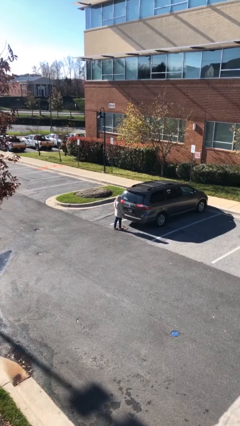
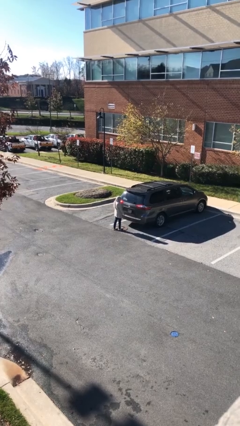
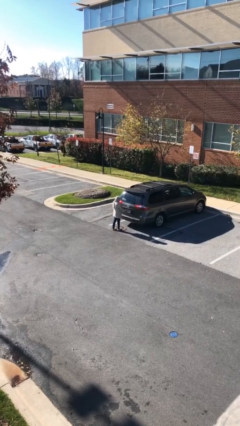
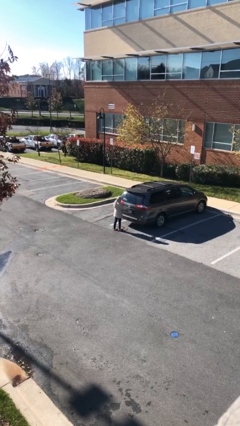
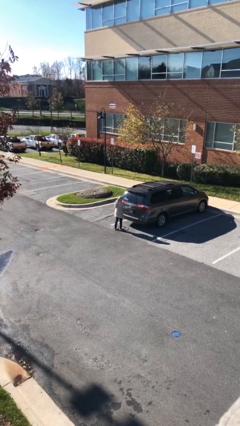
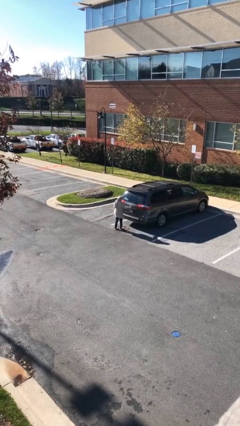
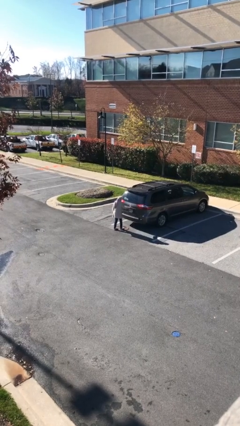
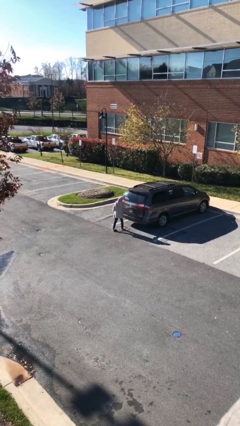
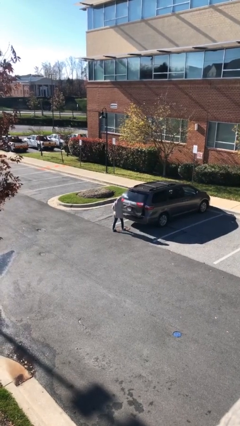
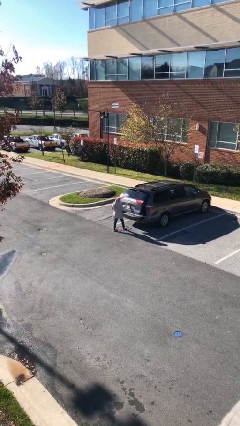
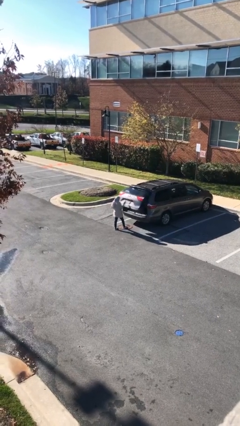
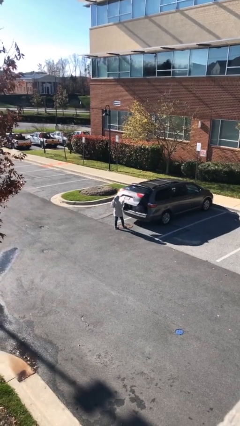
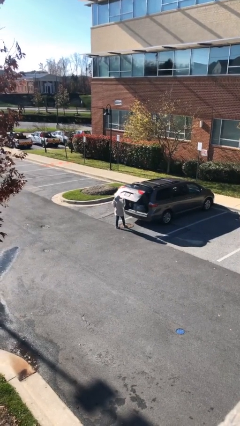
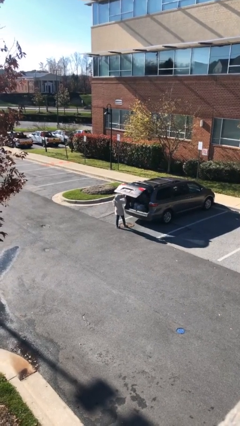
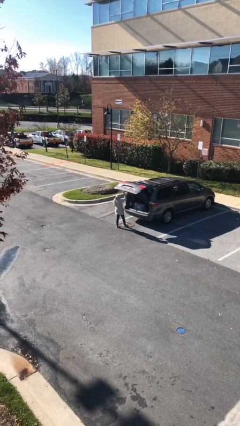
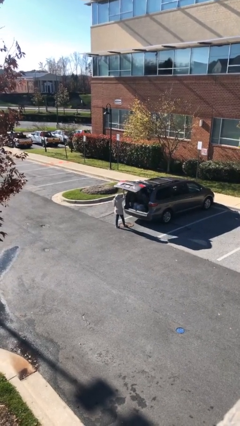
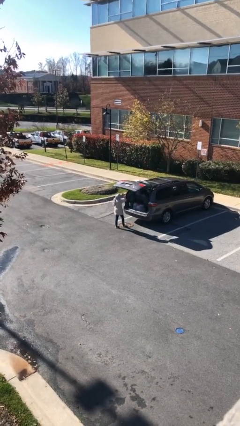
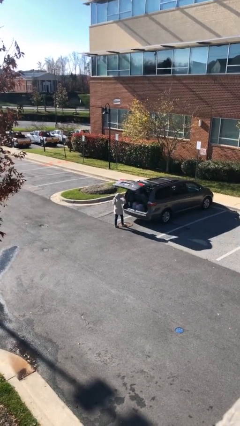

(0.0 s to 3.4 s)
person opens car trunk

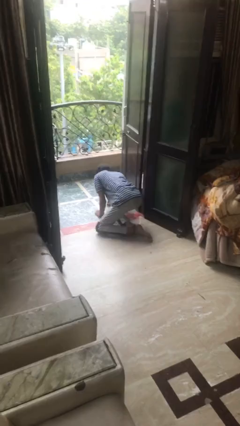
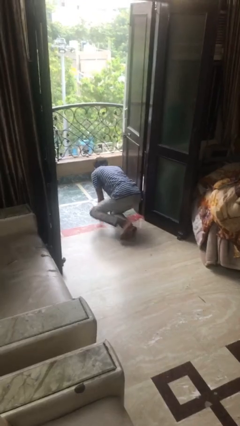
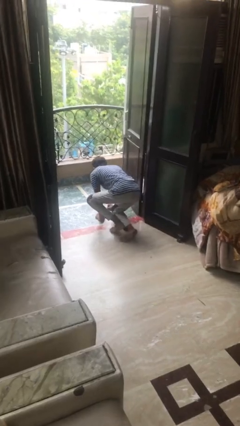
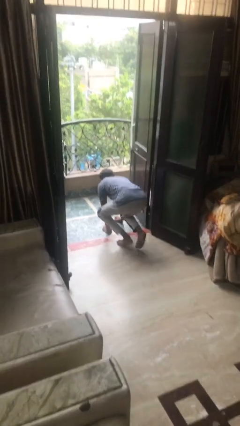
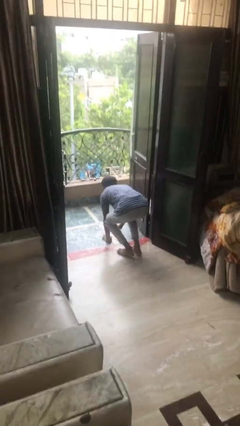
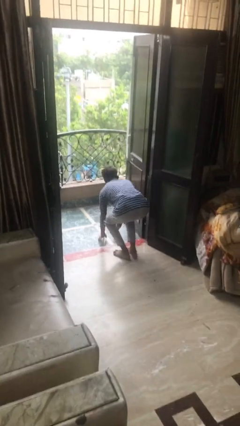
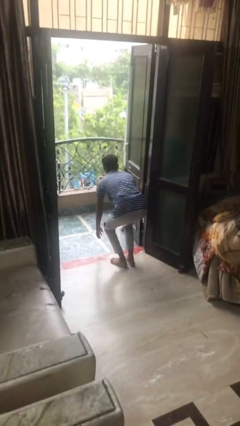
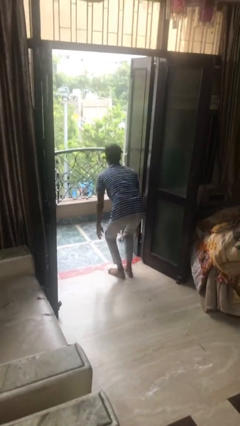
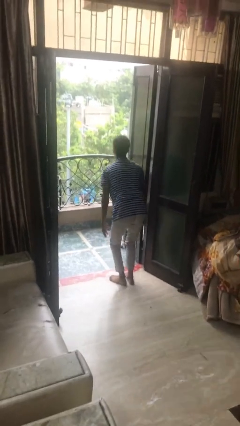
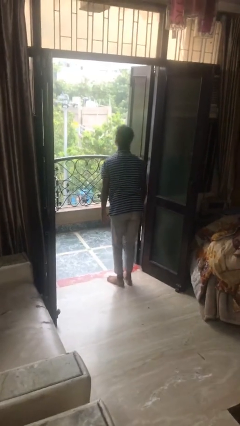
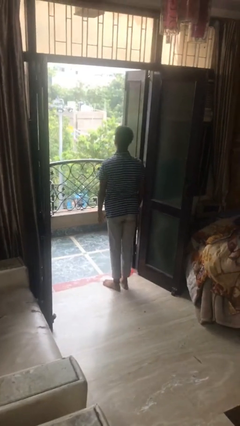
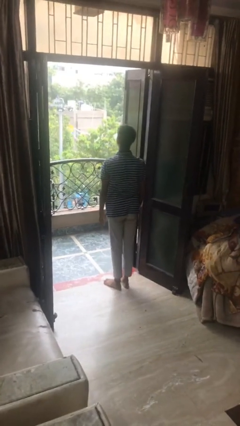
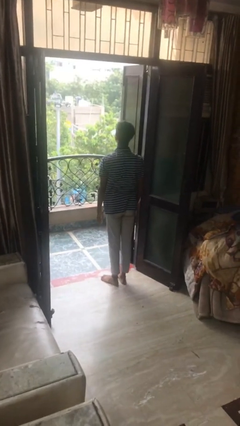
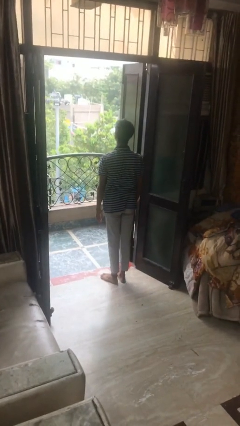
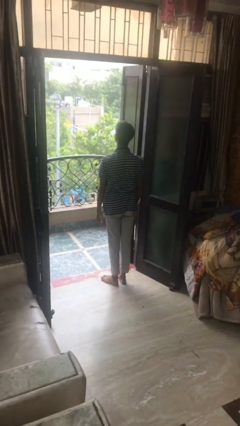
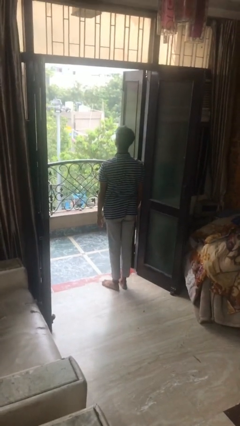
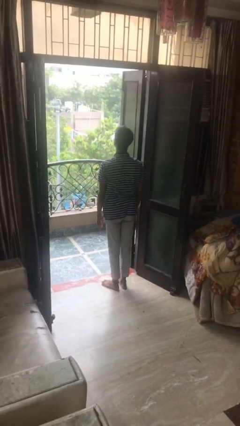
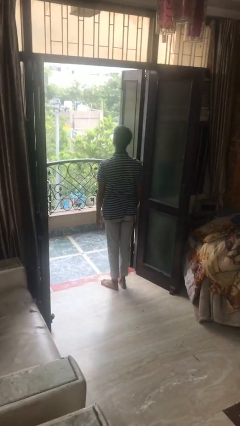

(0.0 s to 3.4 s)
person stands up from floor

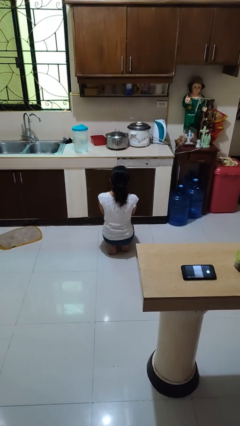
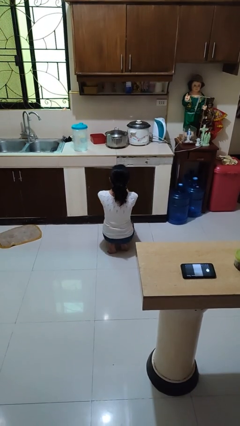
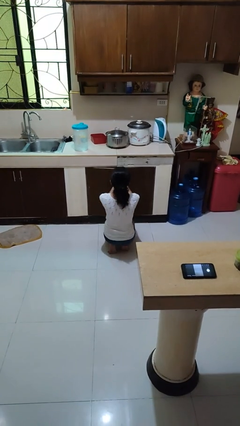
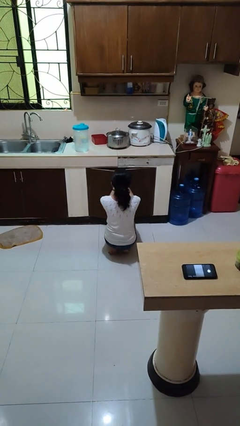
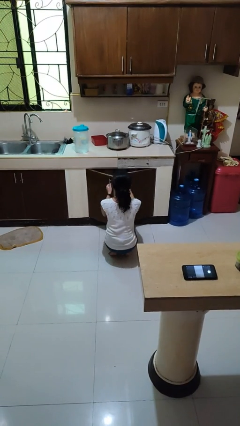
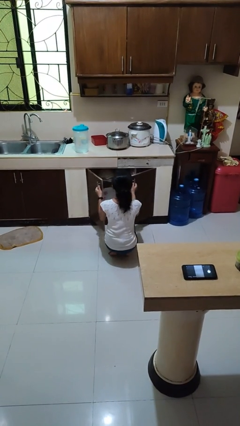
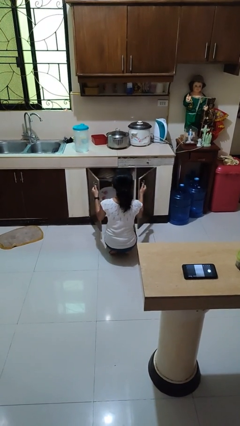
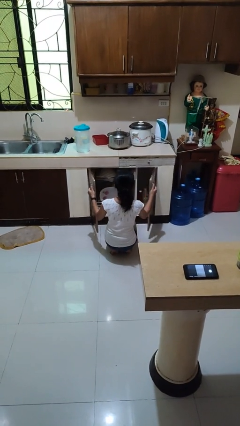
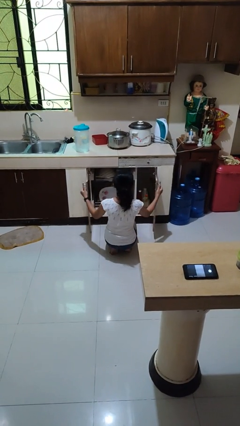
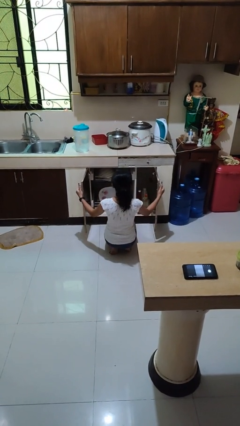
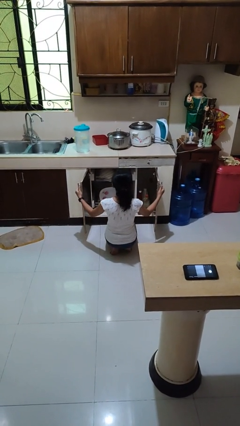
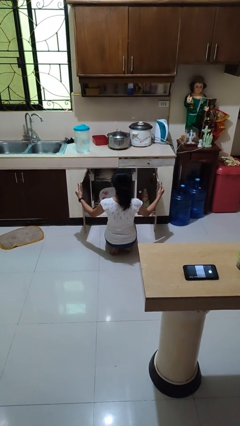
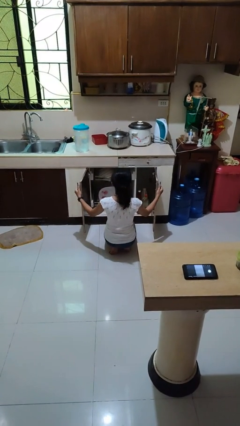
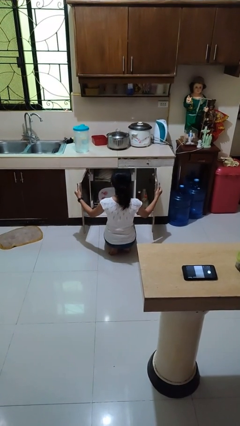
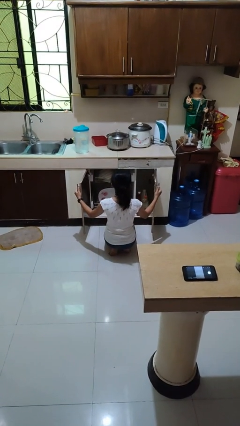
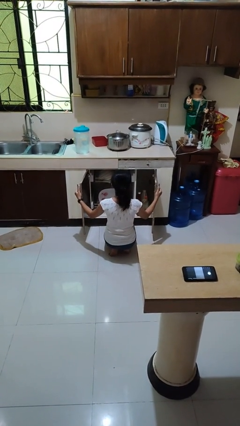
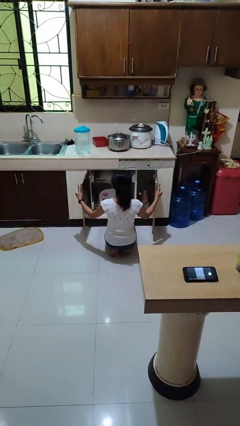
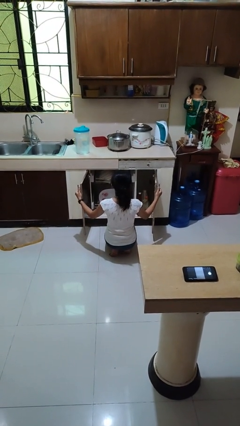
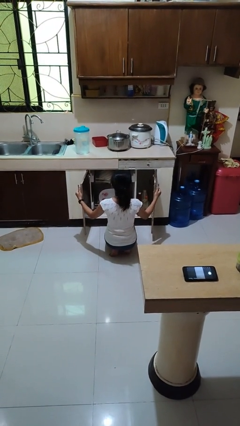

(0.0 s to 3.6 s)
person opens dishwasher

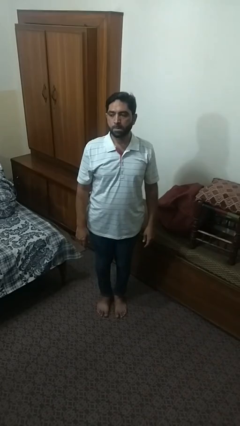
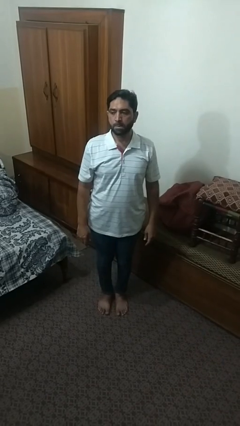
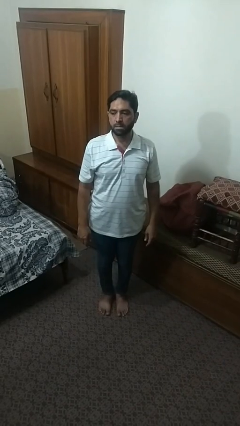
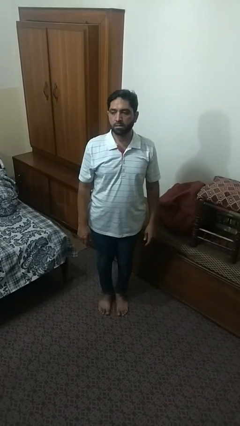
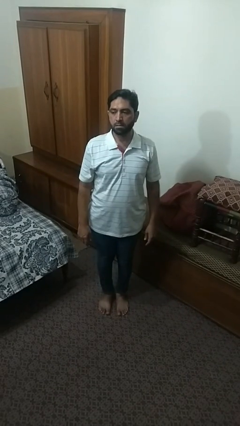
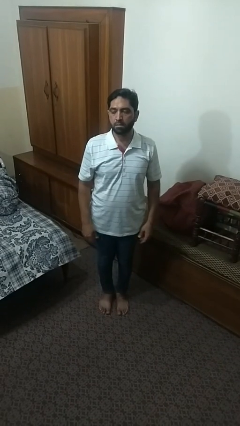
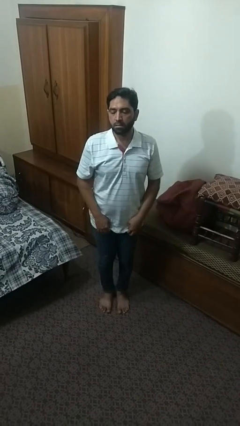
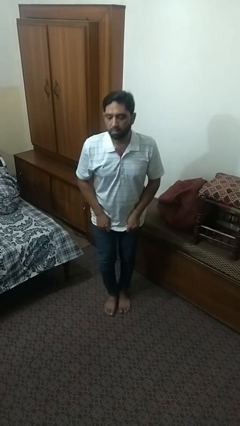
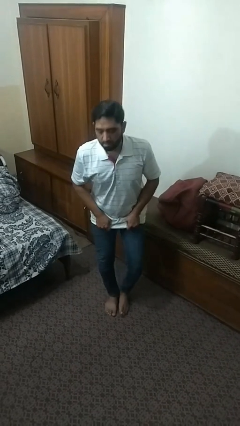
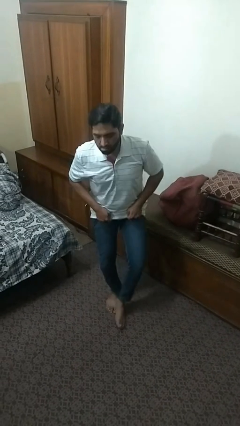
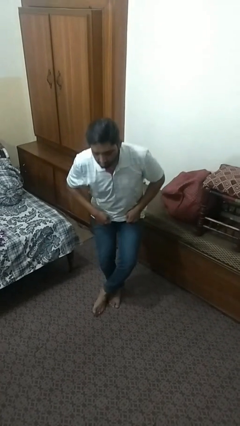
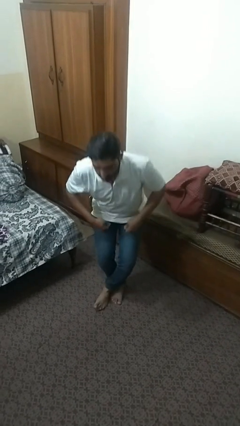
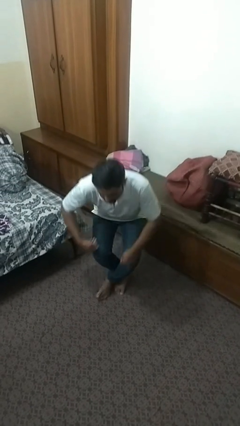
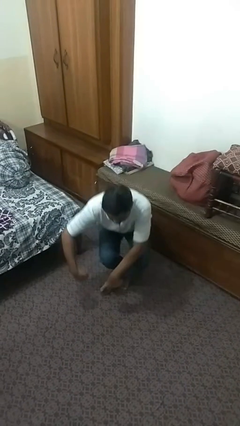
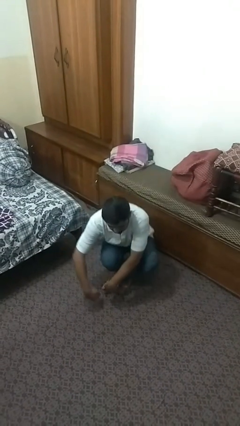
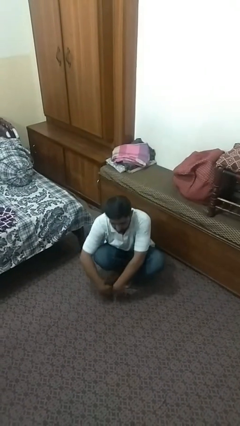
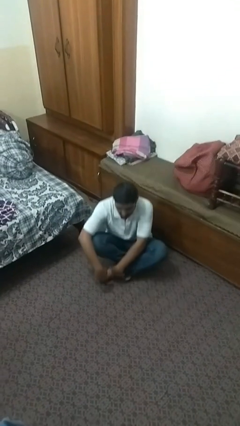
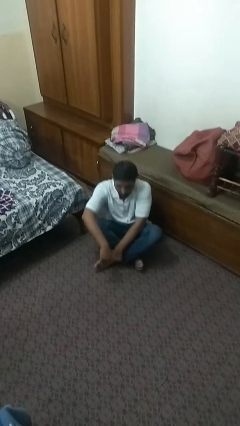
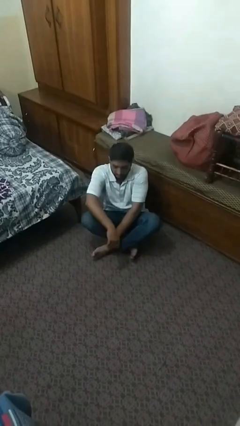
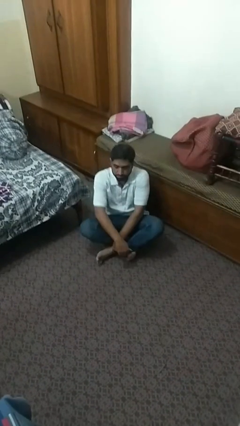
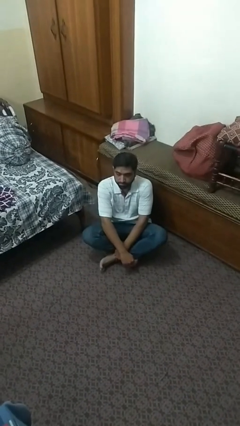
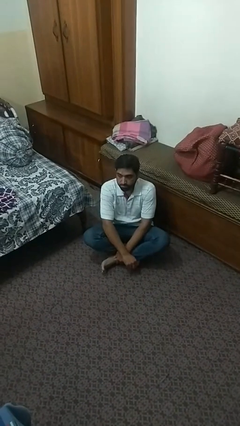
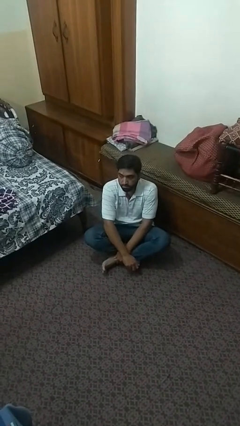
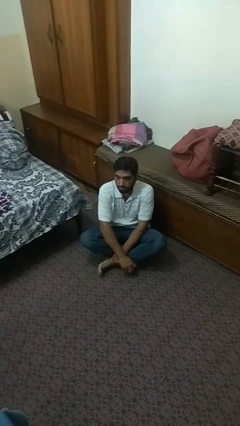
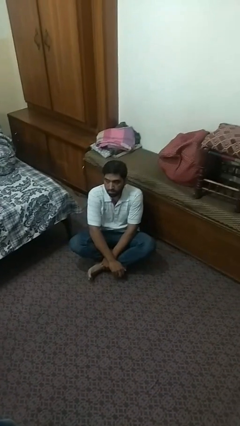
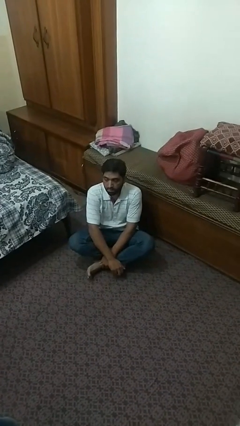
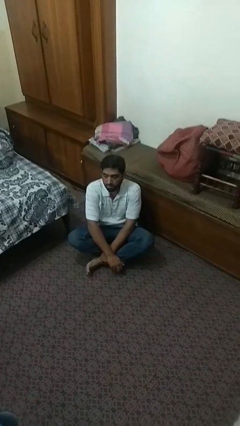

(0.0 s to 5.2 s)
person sits crisscross

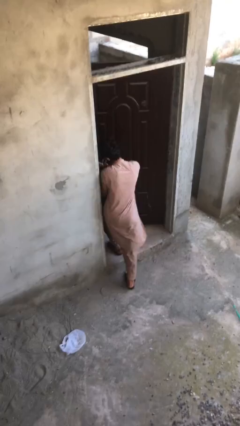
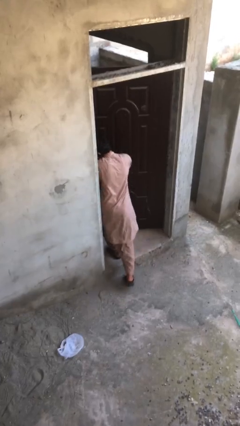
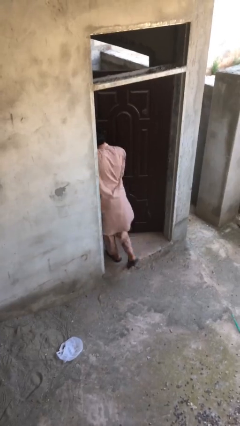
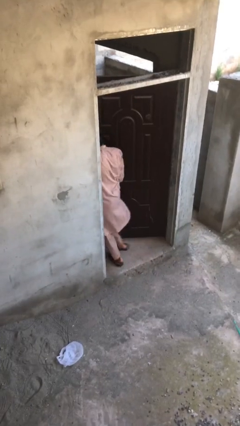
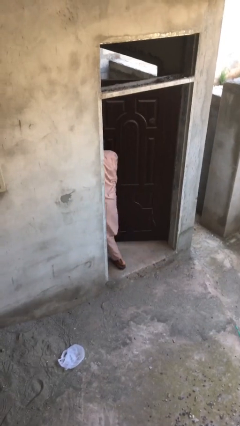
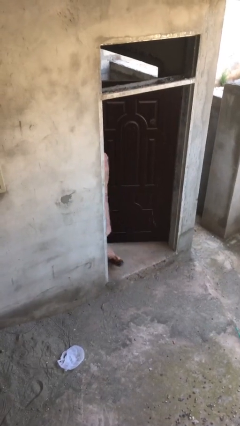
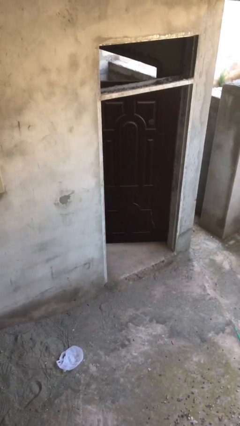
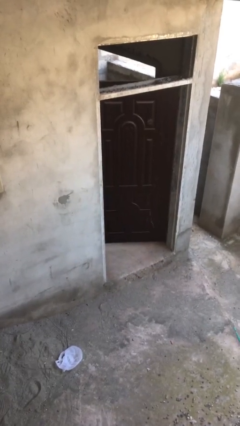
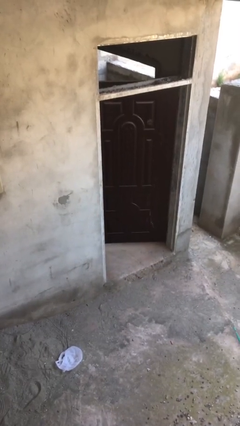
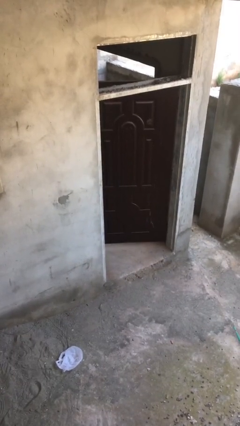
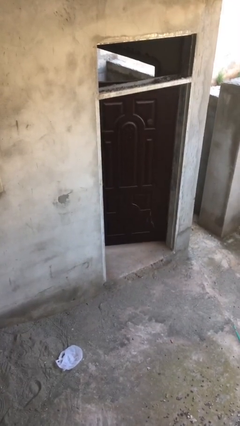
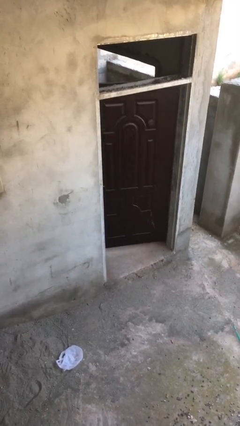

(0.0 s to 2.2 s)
person exits scene through structure
